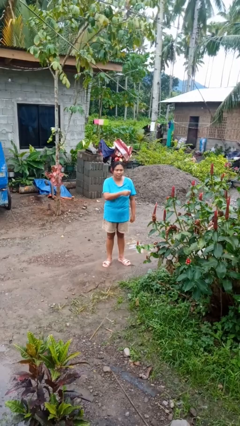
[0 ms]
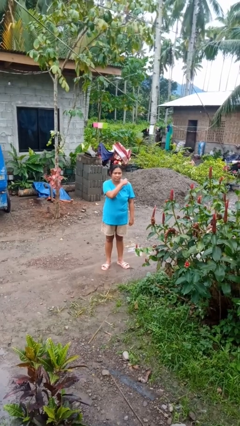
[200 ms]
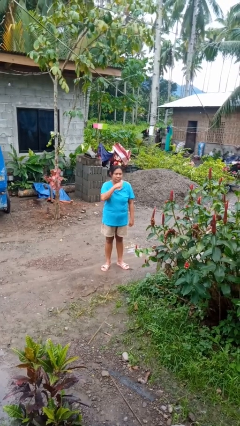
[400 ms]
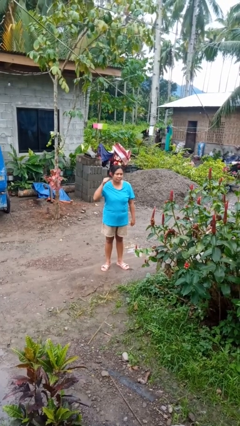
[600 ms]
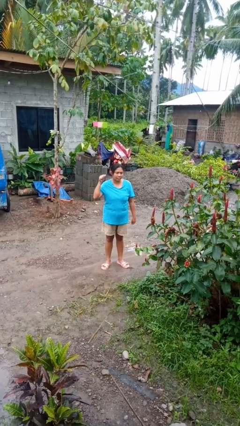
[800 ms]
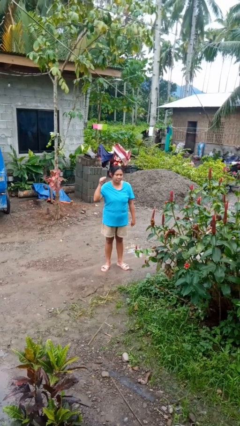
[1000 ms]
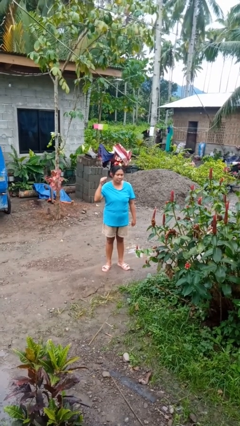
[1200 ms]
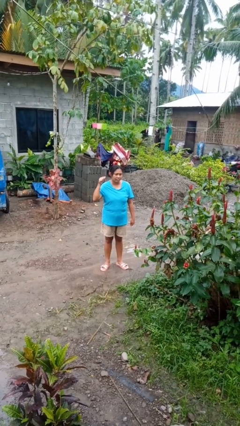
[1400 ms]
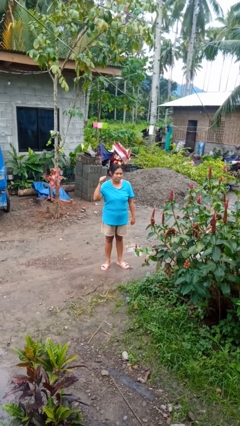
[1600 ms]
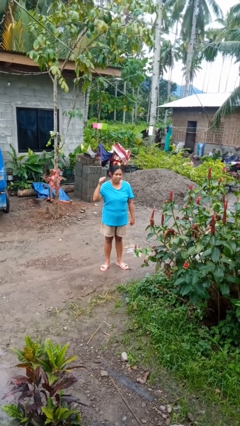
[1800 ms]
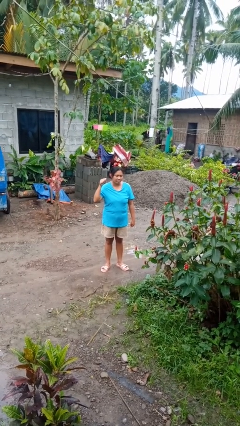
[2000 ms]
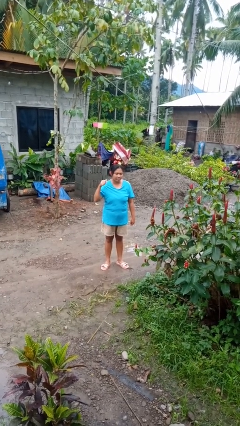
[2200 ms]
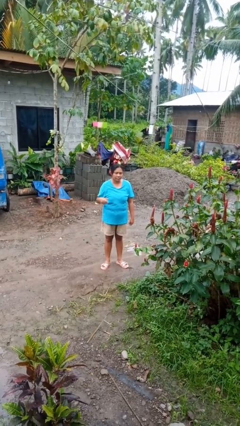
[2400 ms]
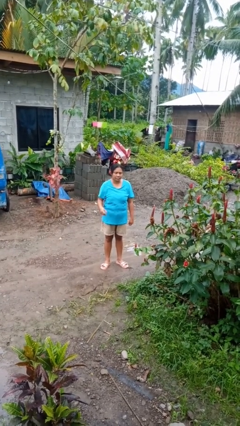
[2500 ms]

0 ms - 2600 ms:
person gestures cut

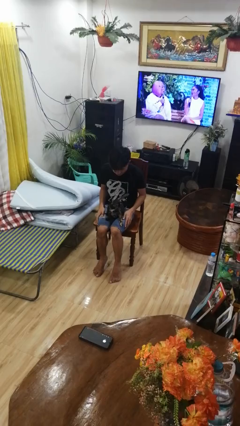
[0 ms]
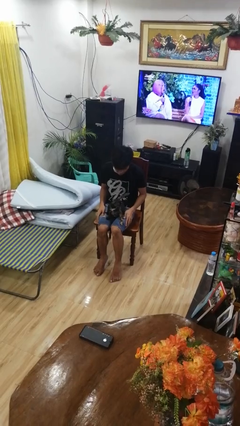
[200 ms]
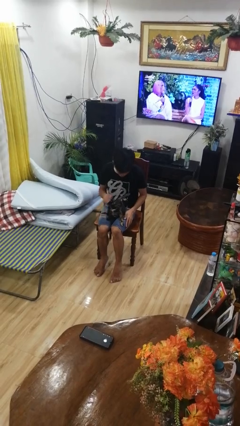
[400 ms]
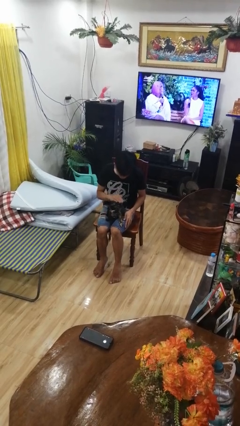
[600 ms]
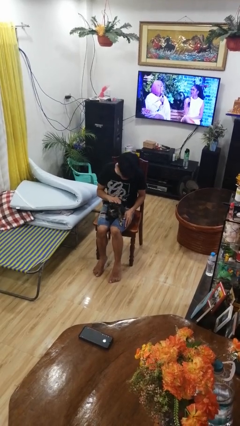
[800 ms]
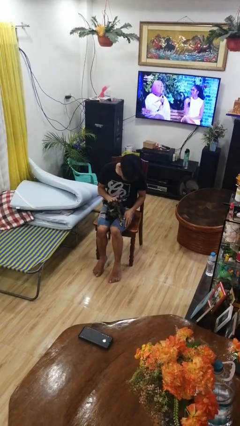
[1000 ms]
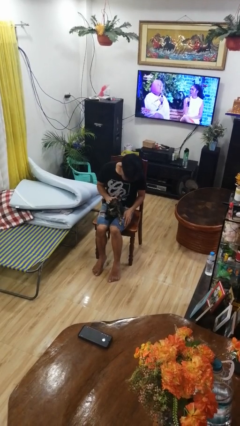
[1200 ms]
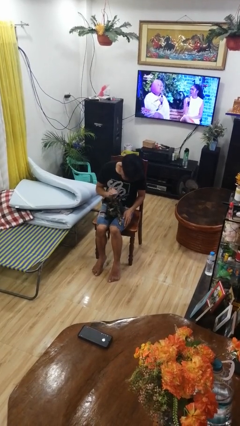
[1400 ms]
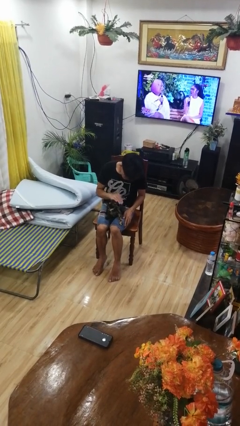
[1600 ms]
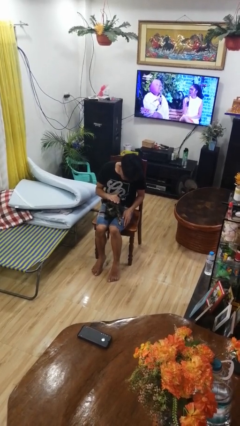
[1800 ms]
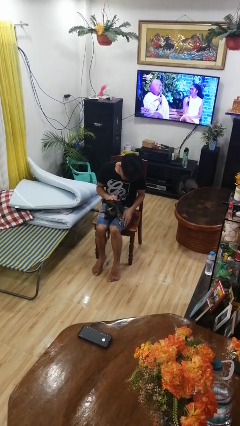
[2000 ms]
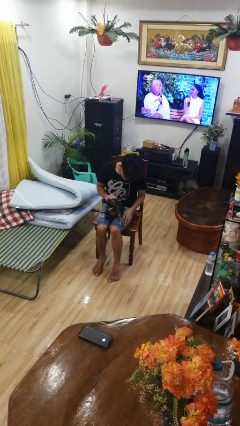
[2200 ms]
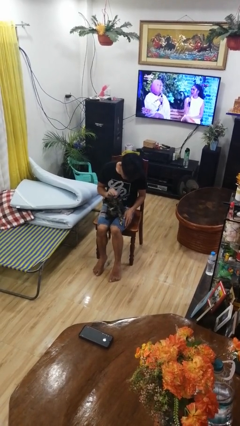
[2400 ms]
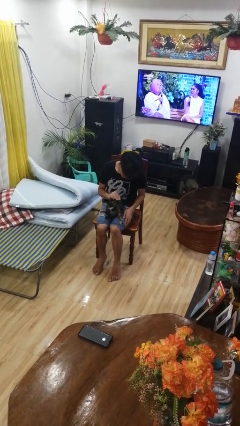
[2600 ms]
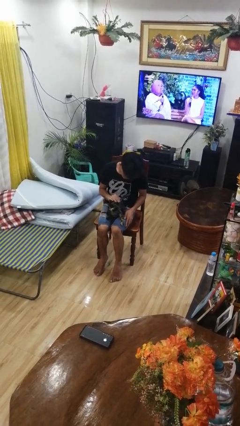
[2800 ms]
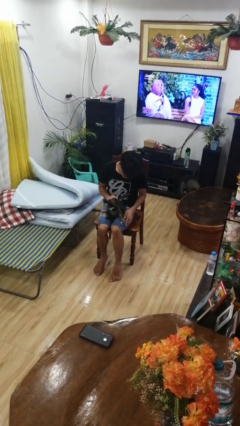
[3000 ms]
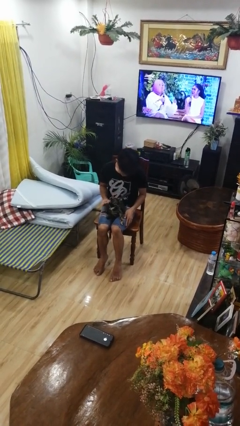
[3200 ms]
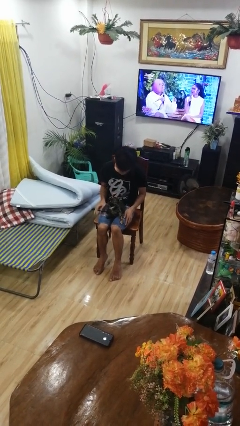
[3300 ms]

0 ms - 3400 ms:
person pets cat

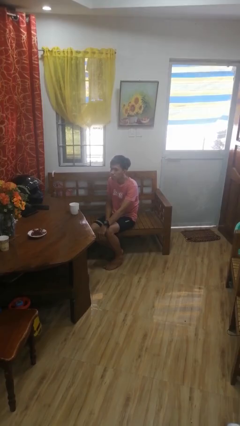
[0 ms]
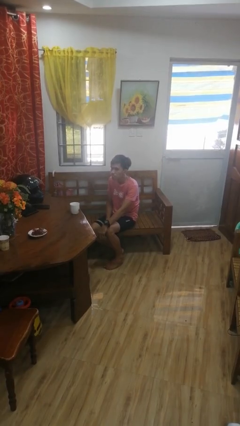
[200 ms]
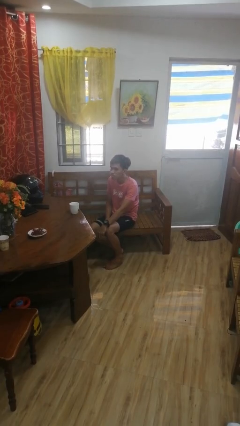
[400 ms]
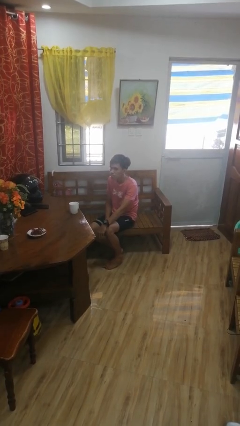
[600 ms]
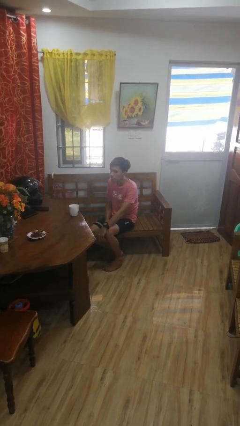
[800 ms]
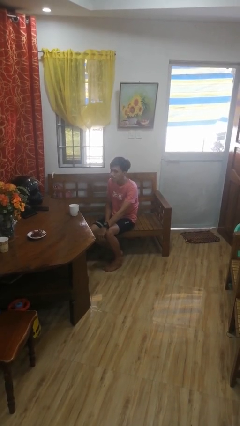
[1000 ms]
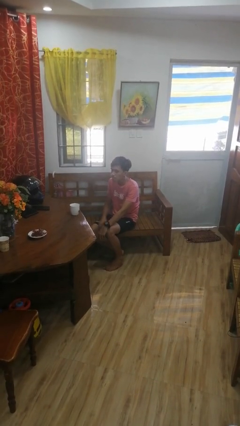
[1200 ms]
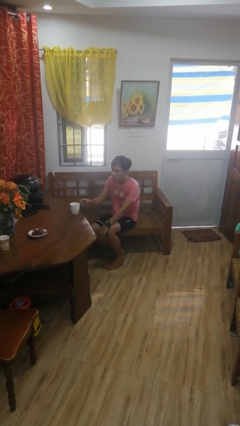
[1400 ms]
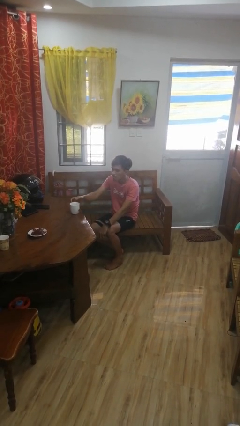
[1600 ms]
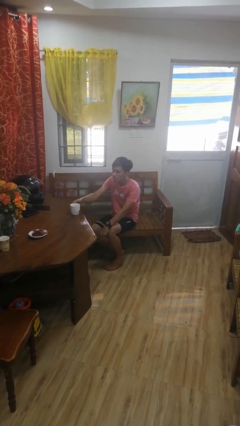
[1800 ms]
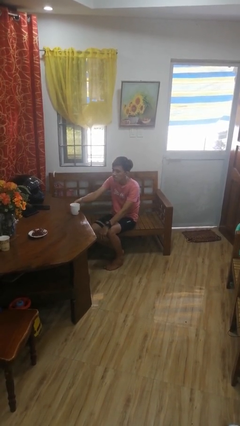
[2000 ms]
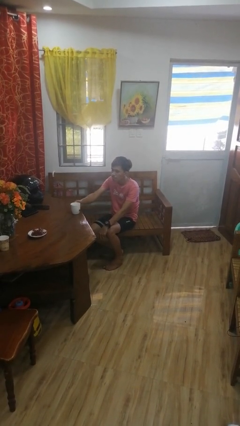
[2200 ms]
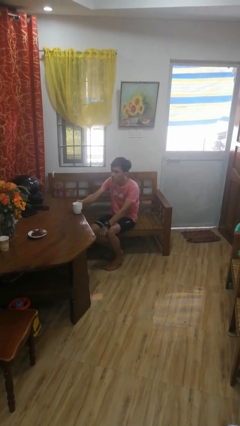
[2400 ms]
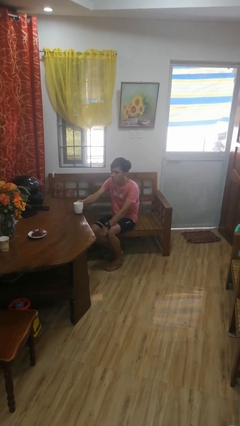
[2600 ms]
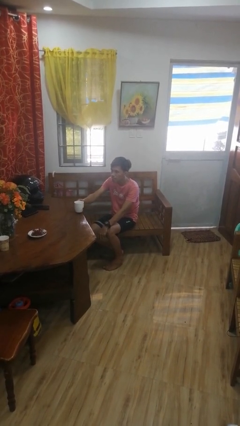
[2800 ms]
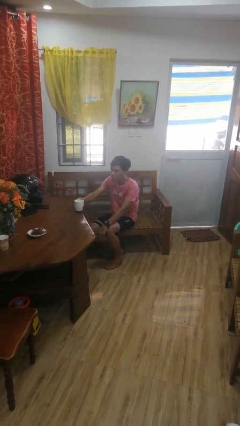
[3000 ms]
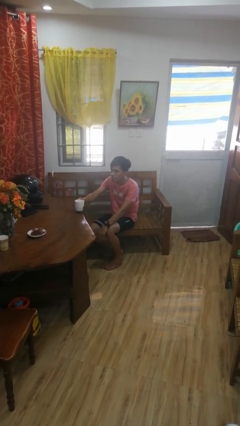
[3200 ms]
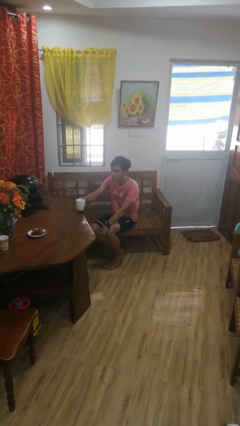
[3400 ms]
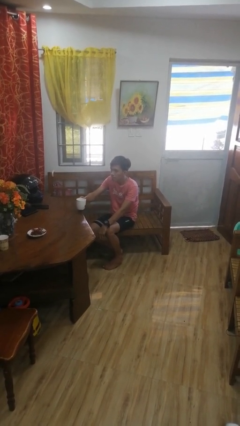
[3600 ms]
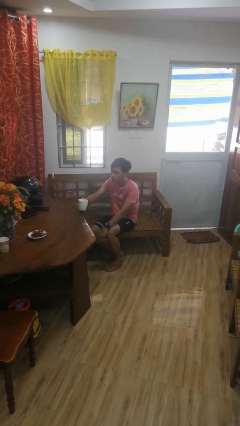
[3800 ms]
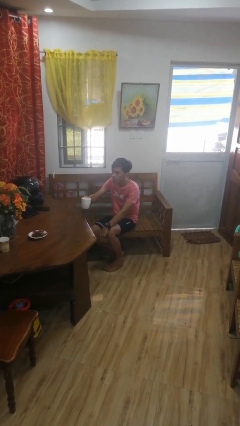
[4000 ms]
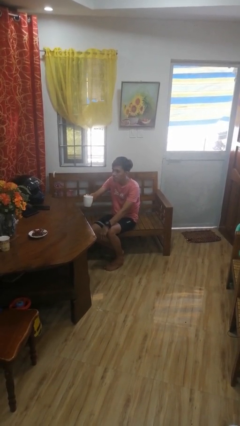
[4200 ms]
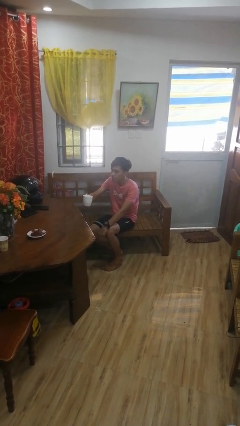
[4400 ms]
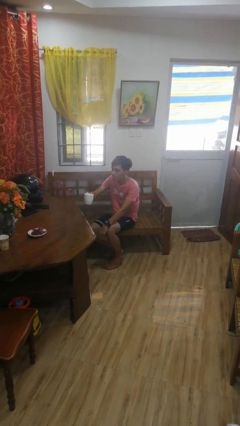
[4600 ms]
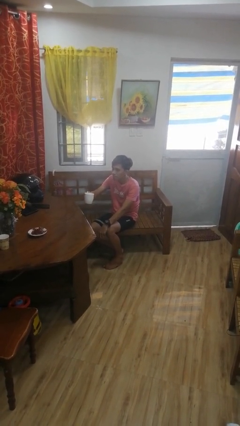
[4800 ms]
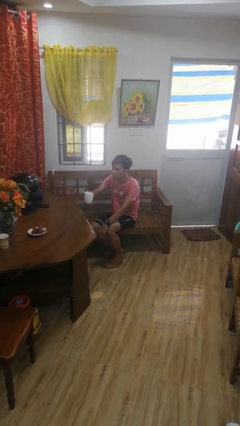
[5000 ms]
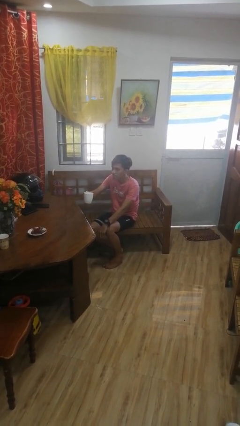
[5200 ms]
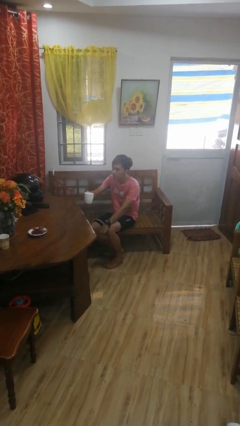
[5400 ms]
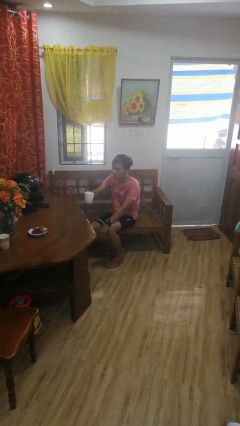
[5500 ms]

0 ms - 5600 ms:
person picks up object from table

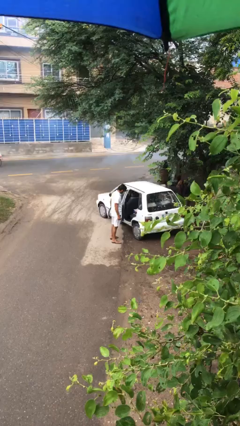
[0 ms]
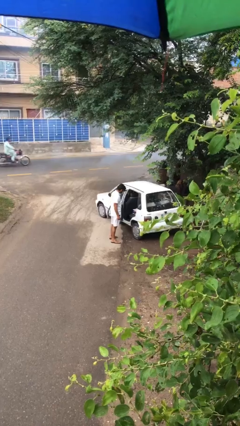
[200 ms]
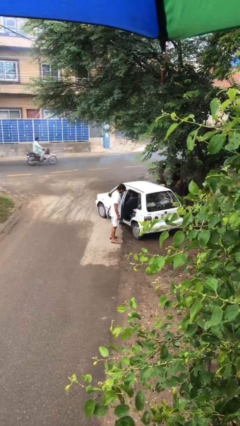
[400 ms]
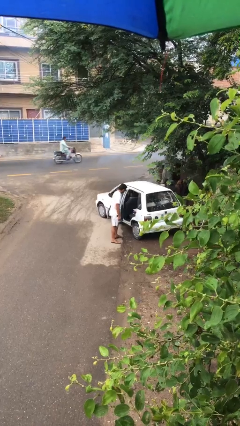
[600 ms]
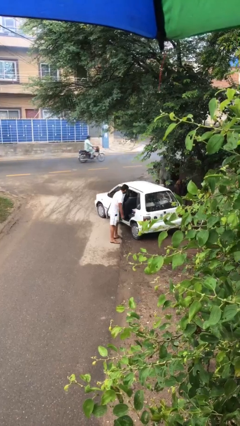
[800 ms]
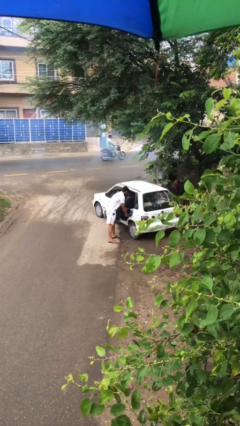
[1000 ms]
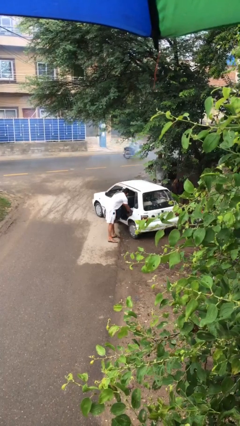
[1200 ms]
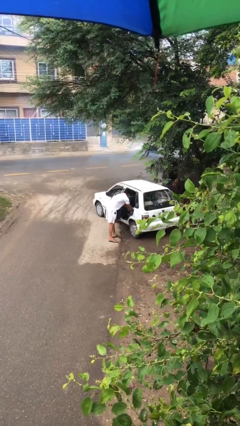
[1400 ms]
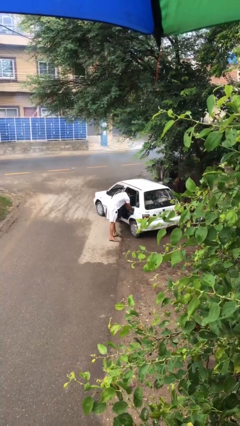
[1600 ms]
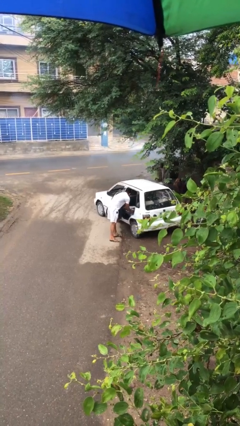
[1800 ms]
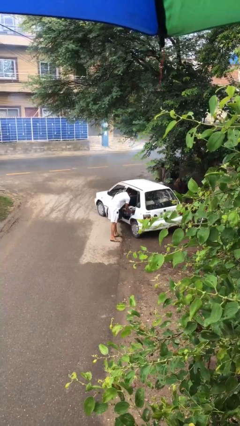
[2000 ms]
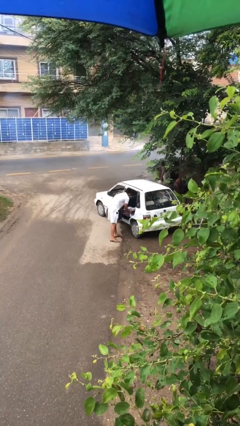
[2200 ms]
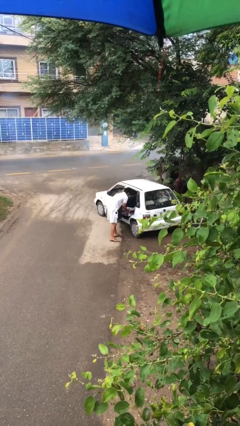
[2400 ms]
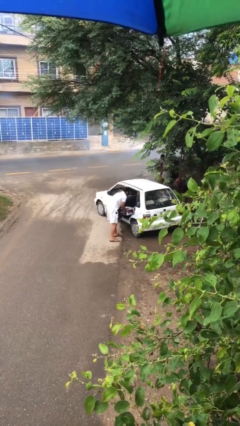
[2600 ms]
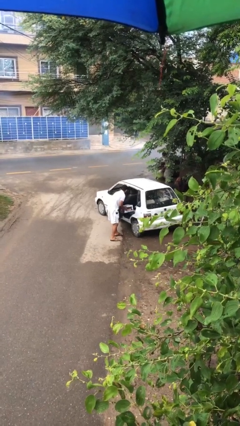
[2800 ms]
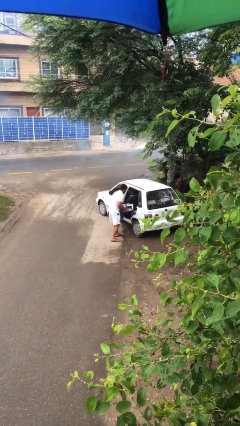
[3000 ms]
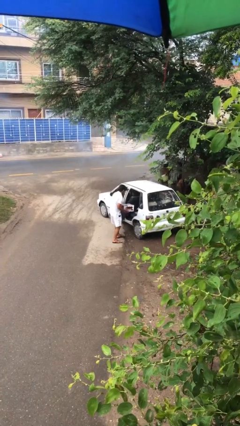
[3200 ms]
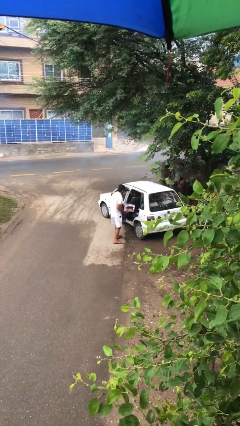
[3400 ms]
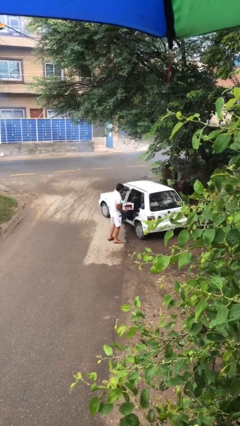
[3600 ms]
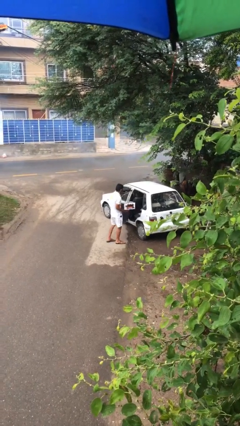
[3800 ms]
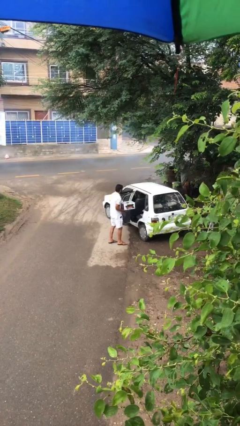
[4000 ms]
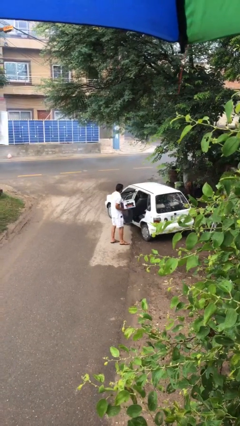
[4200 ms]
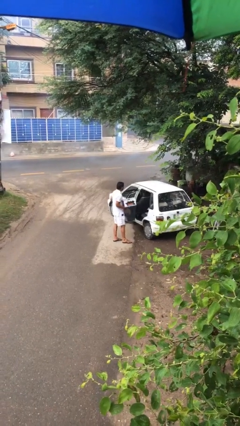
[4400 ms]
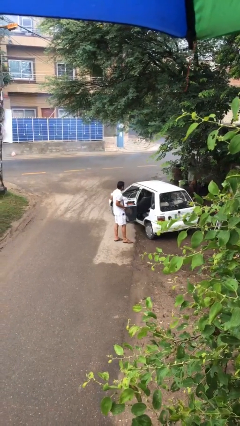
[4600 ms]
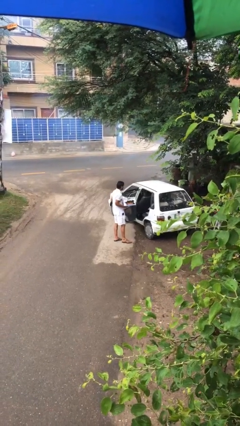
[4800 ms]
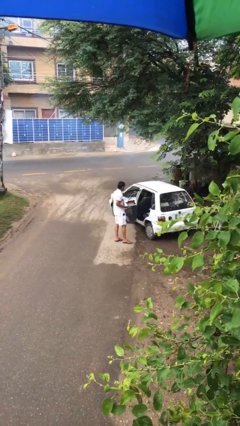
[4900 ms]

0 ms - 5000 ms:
person unloads car

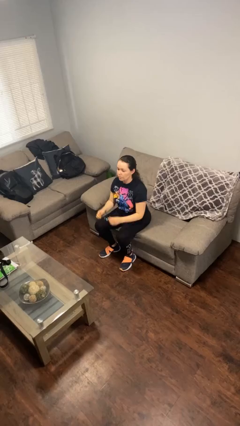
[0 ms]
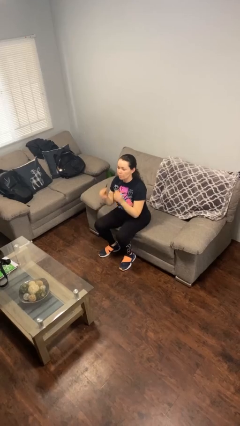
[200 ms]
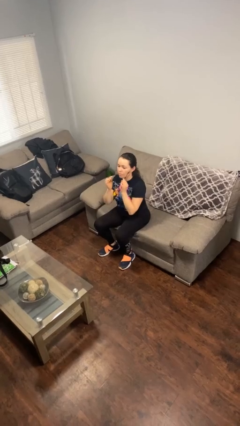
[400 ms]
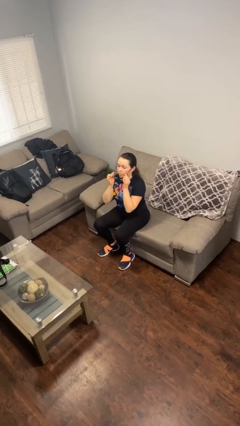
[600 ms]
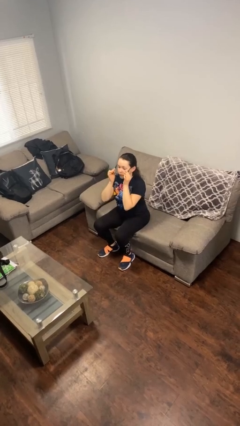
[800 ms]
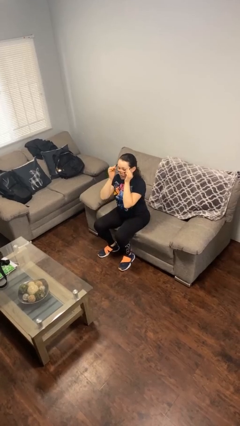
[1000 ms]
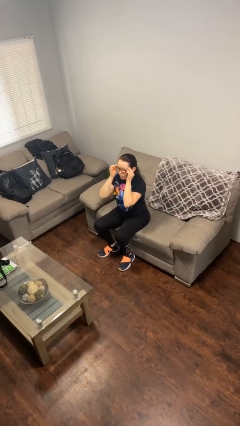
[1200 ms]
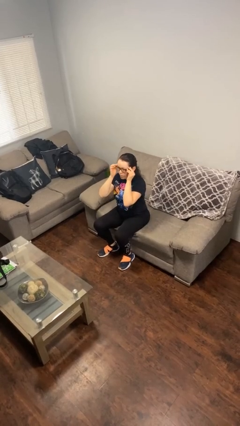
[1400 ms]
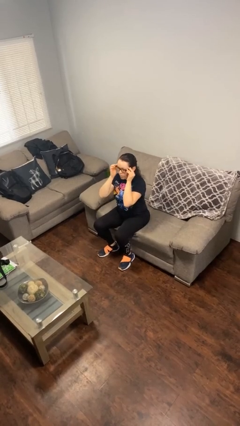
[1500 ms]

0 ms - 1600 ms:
person puts on glasses
